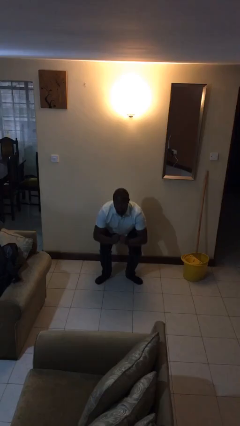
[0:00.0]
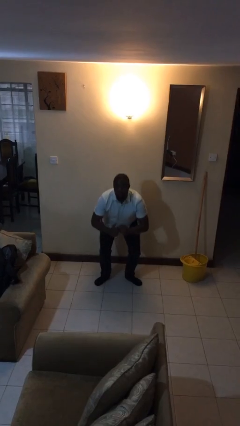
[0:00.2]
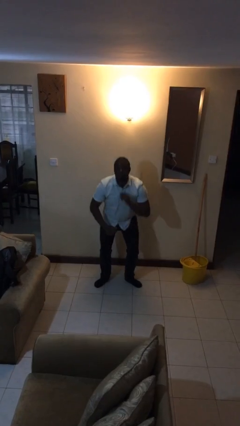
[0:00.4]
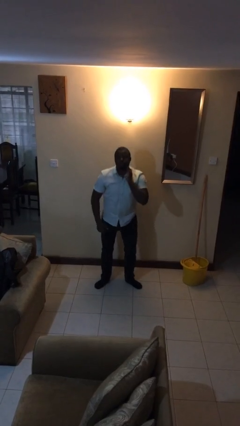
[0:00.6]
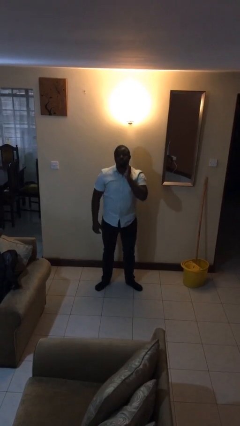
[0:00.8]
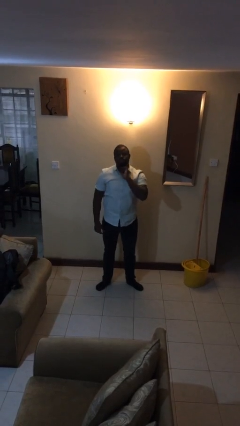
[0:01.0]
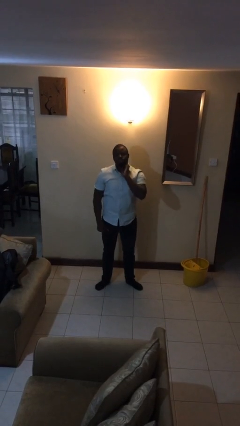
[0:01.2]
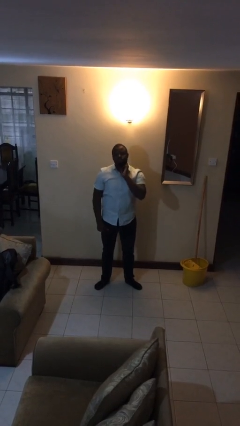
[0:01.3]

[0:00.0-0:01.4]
person stands up

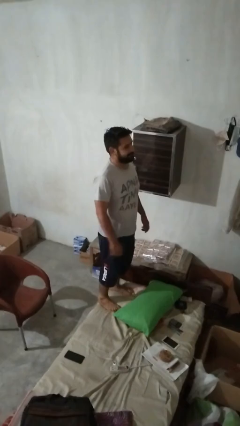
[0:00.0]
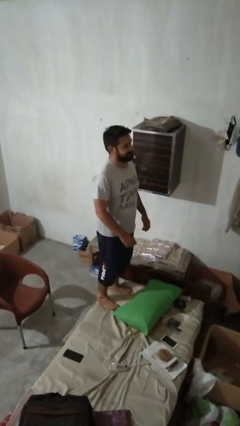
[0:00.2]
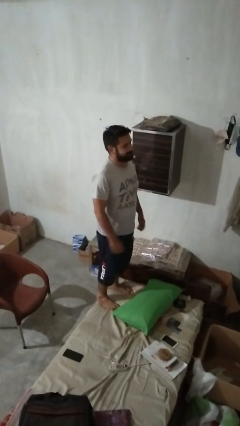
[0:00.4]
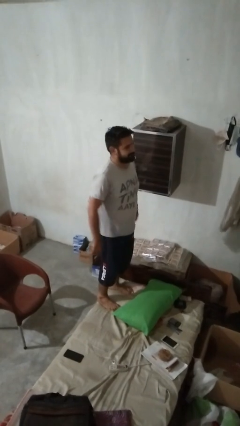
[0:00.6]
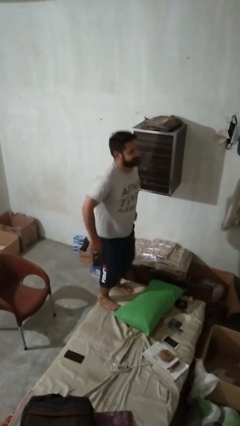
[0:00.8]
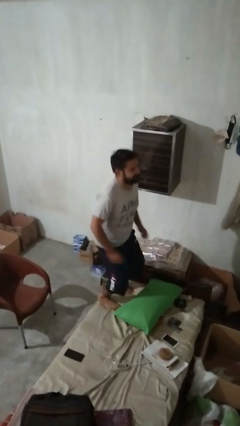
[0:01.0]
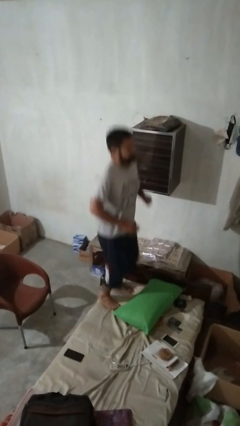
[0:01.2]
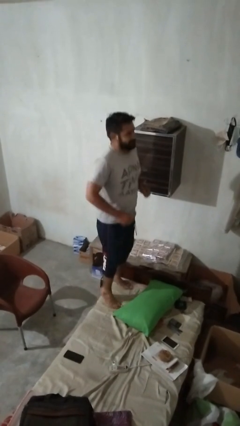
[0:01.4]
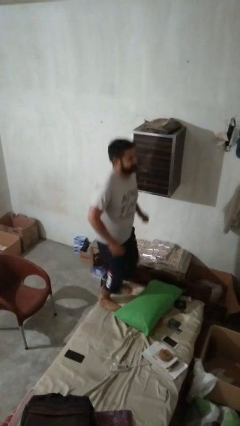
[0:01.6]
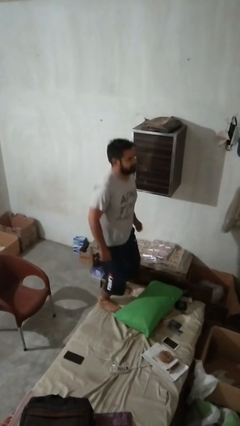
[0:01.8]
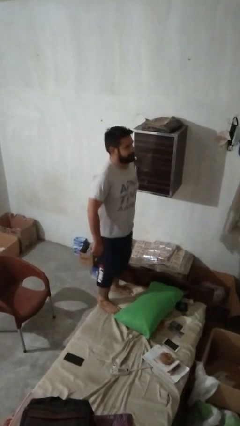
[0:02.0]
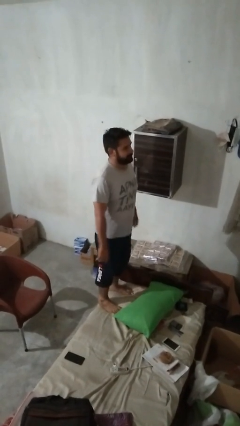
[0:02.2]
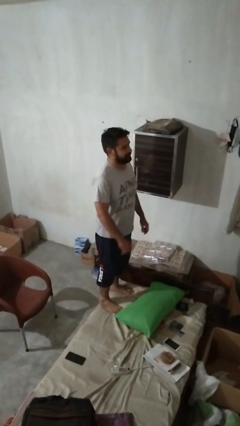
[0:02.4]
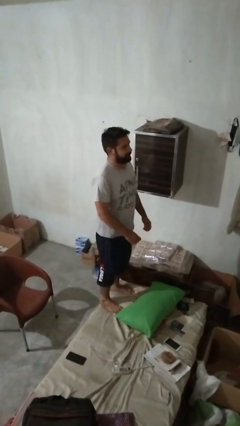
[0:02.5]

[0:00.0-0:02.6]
person jumps on couch

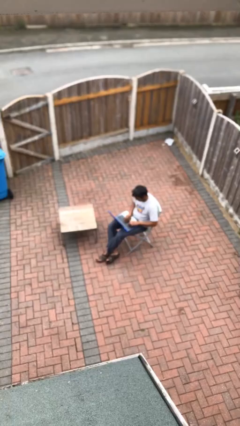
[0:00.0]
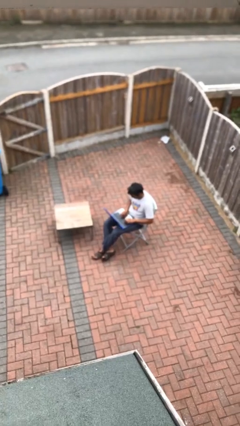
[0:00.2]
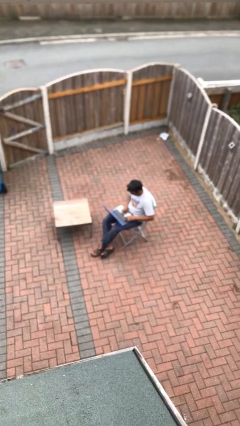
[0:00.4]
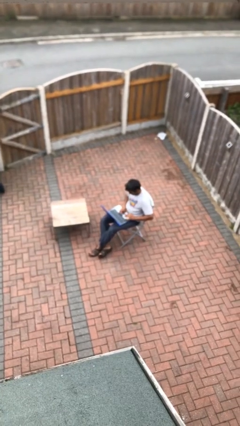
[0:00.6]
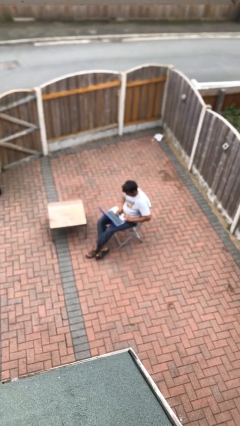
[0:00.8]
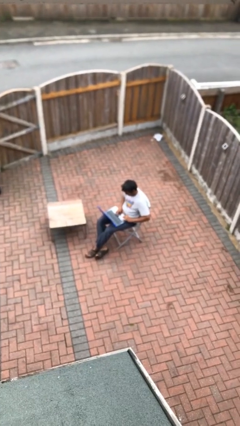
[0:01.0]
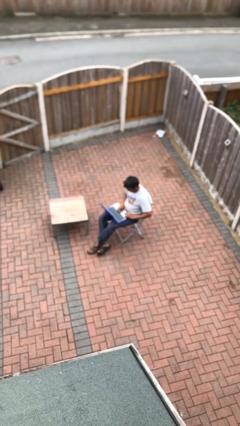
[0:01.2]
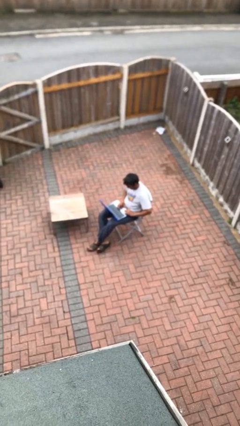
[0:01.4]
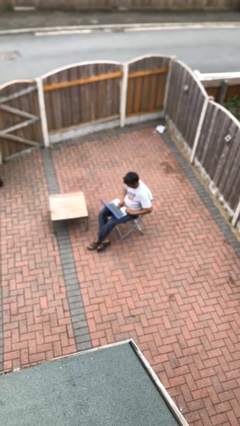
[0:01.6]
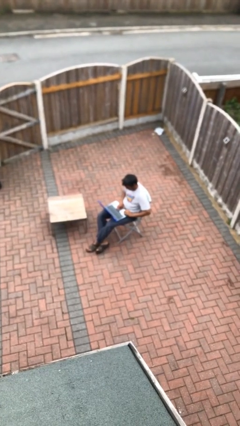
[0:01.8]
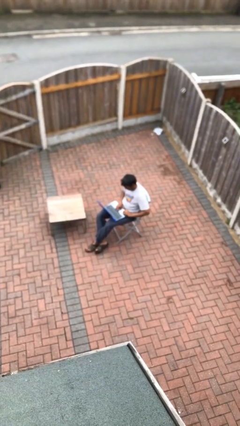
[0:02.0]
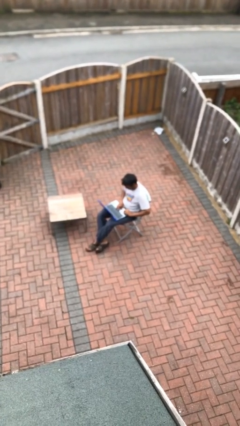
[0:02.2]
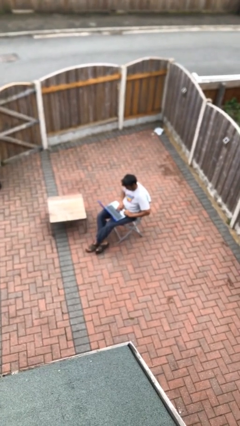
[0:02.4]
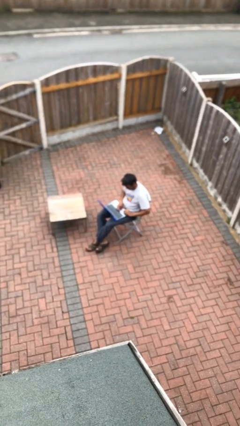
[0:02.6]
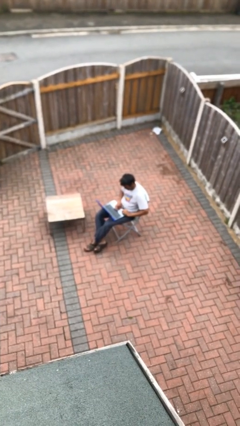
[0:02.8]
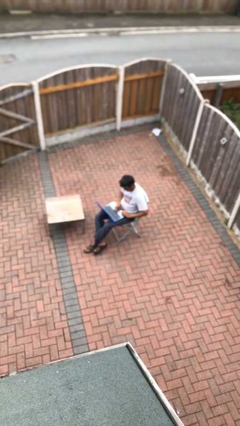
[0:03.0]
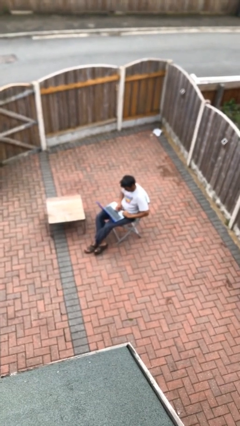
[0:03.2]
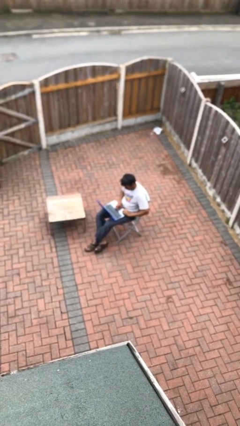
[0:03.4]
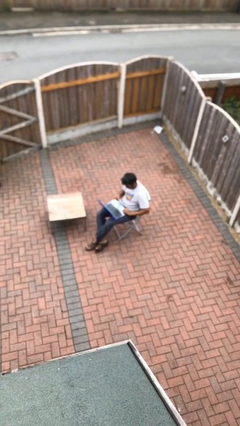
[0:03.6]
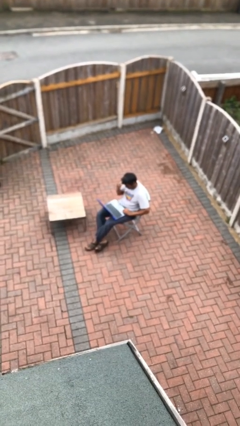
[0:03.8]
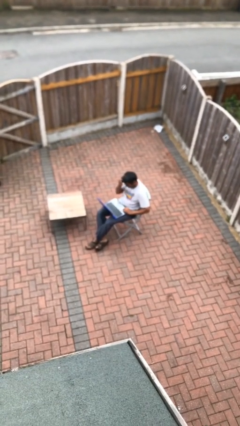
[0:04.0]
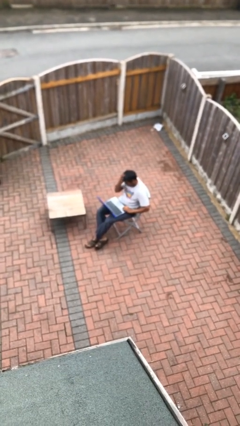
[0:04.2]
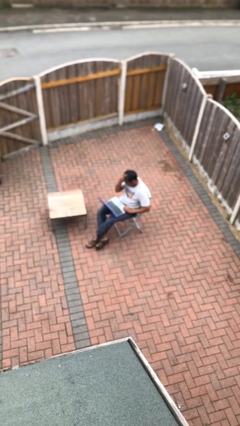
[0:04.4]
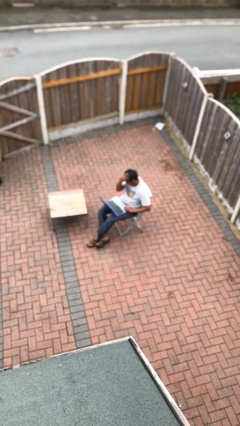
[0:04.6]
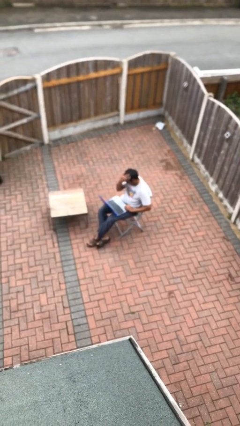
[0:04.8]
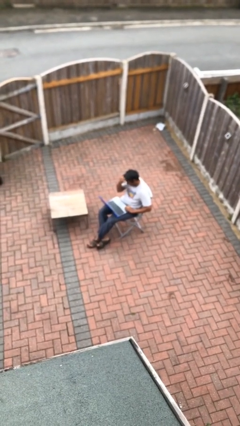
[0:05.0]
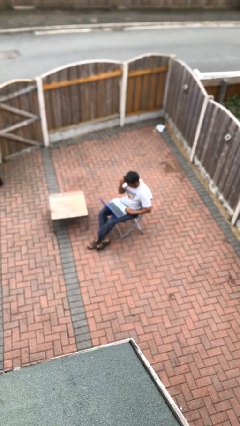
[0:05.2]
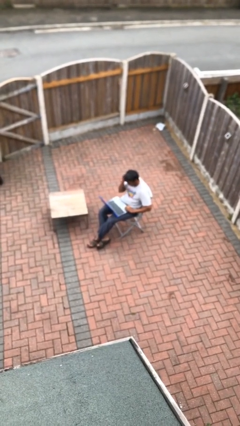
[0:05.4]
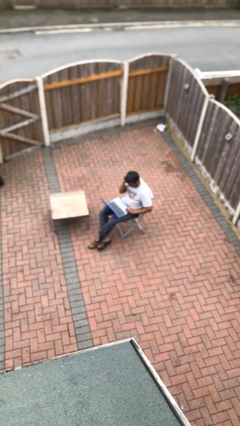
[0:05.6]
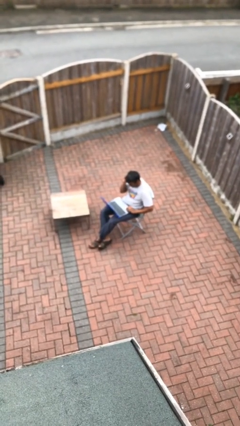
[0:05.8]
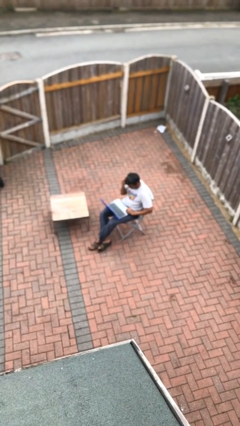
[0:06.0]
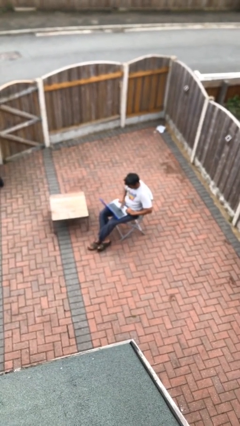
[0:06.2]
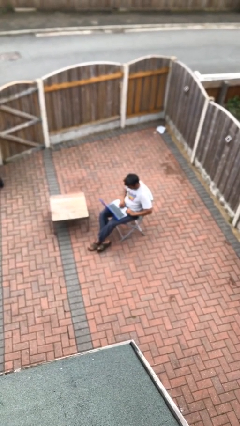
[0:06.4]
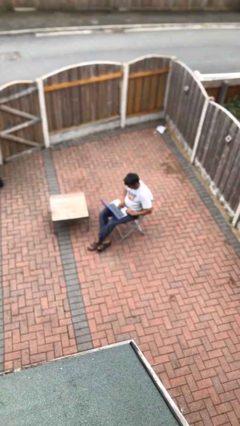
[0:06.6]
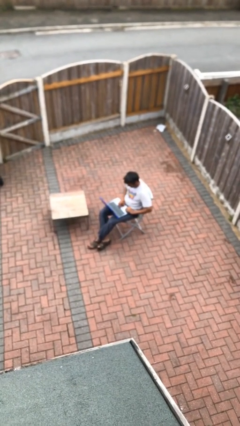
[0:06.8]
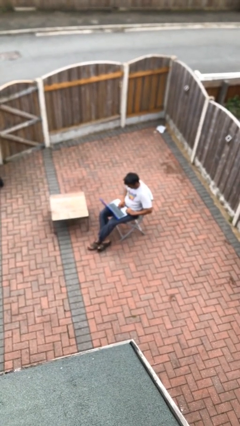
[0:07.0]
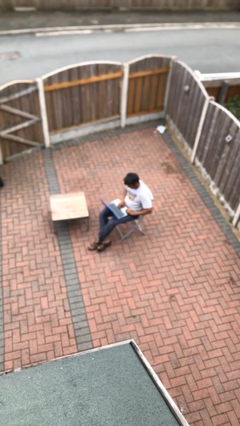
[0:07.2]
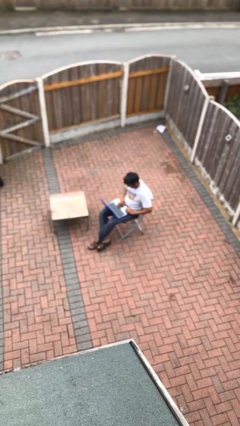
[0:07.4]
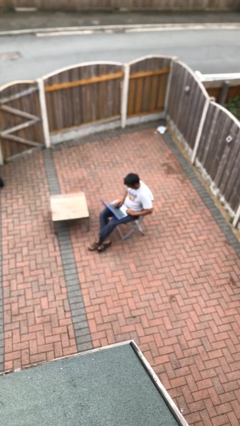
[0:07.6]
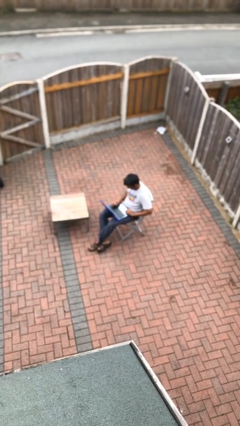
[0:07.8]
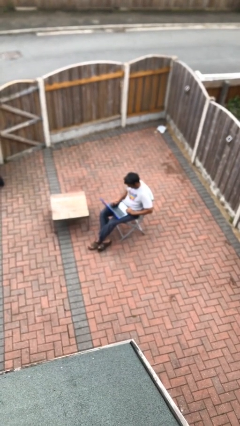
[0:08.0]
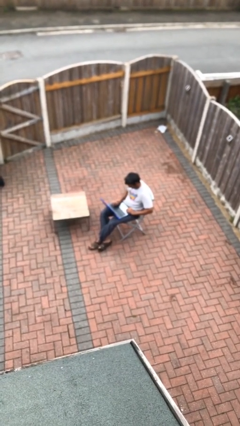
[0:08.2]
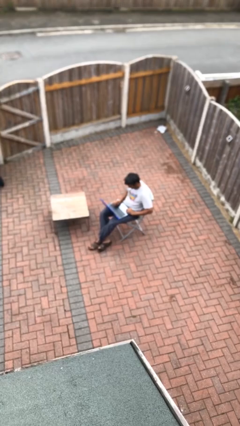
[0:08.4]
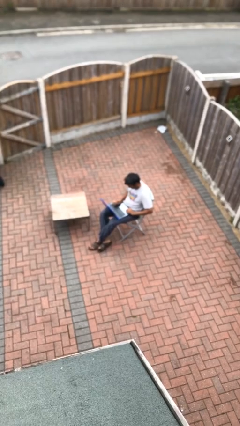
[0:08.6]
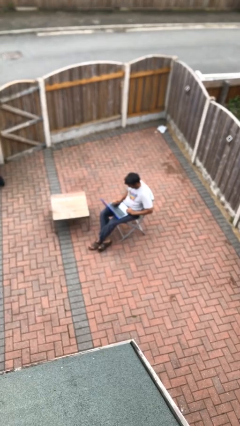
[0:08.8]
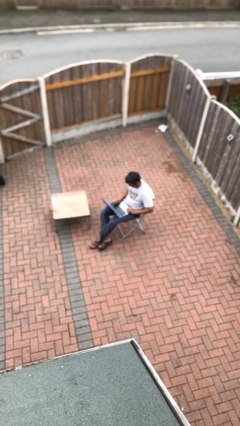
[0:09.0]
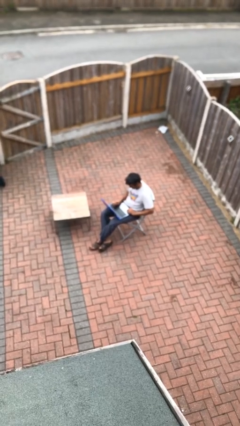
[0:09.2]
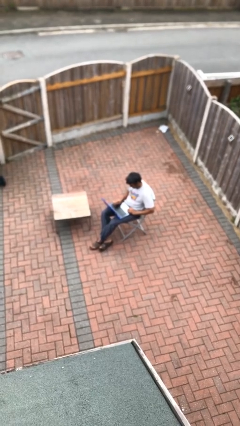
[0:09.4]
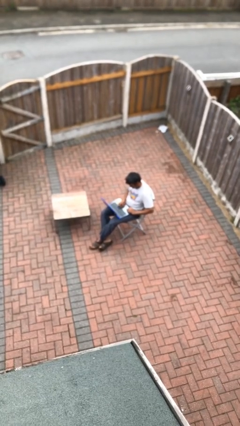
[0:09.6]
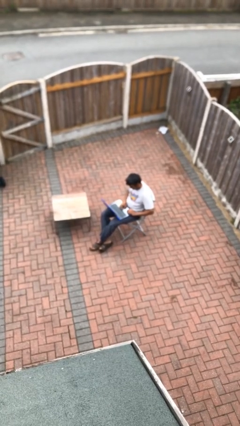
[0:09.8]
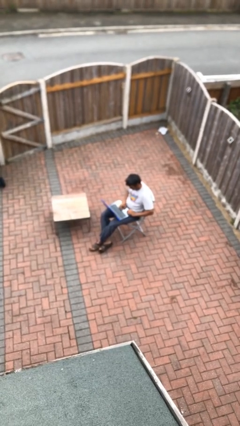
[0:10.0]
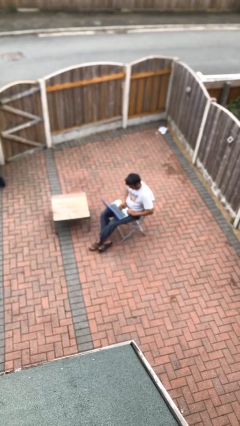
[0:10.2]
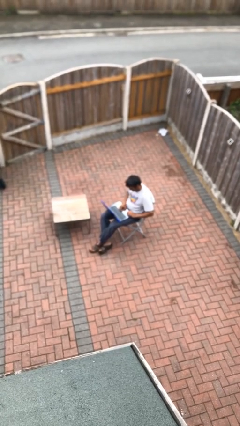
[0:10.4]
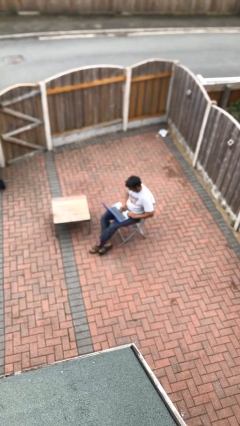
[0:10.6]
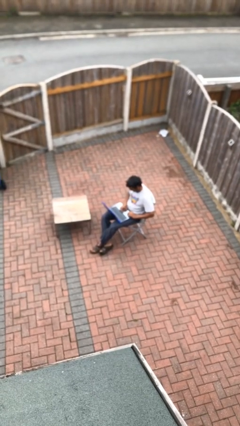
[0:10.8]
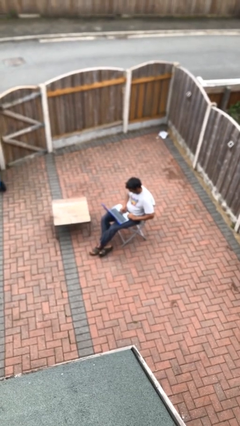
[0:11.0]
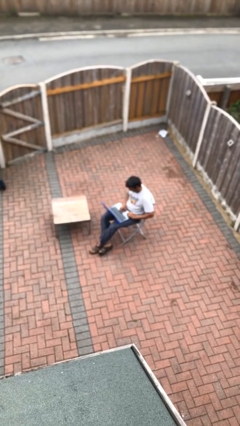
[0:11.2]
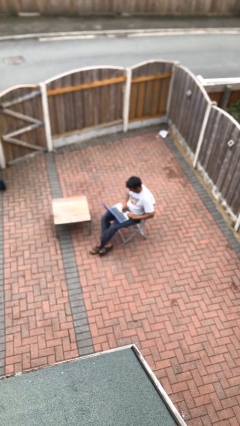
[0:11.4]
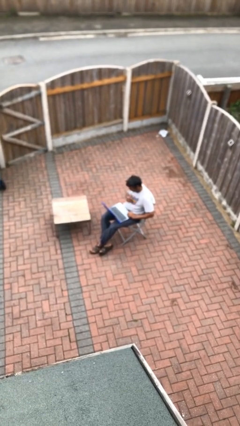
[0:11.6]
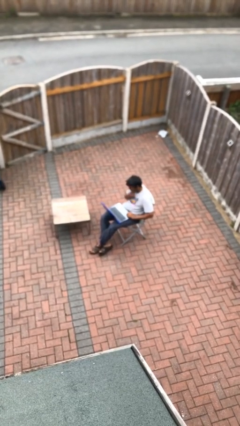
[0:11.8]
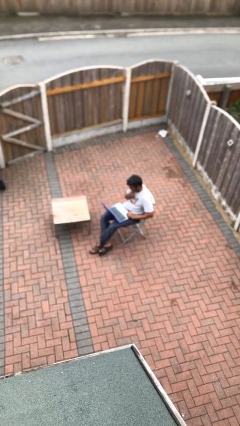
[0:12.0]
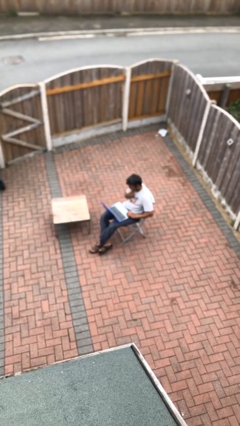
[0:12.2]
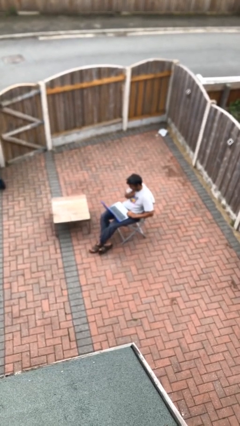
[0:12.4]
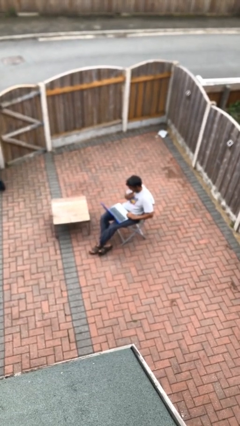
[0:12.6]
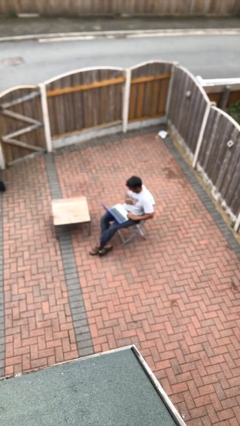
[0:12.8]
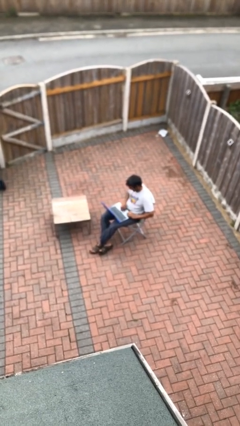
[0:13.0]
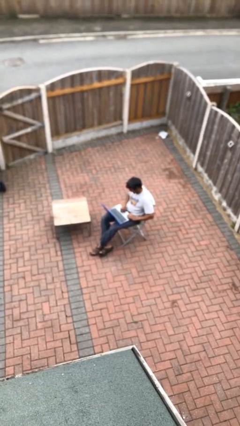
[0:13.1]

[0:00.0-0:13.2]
person interacts with laptop

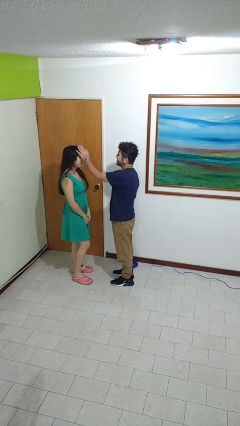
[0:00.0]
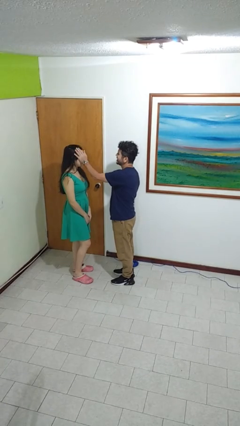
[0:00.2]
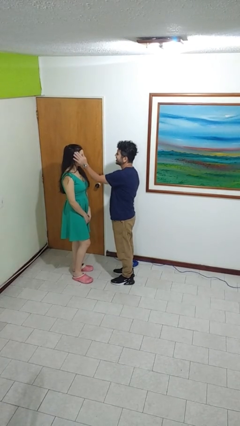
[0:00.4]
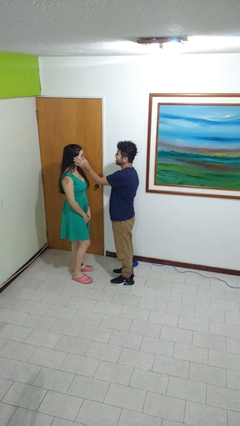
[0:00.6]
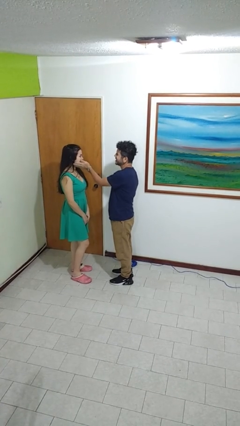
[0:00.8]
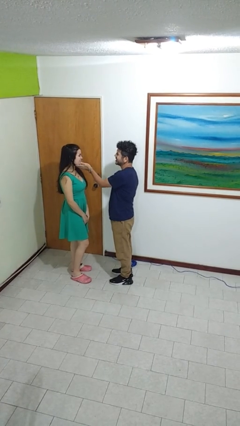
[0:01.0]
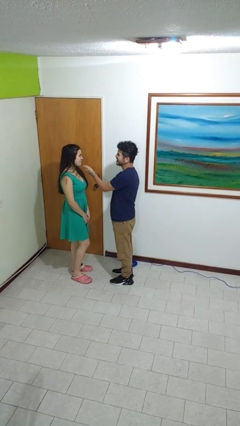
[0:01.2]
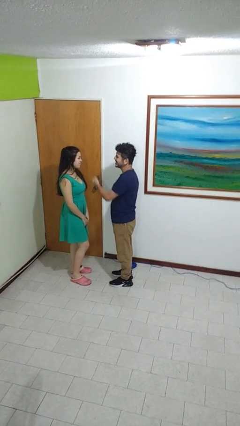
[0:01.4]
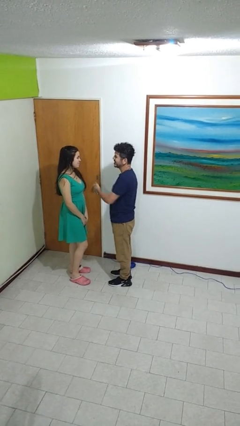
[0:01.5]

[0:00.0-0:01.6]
person touches face of person
